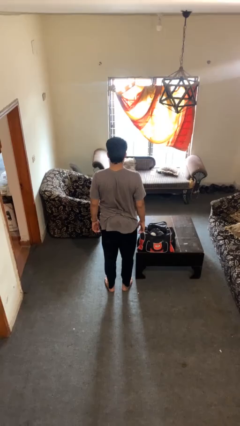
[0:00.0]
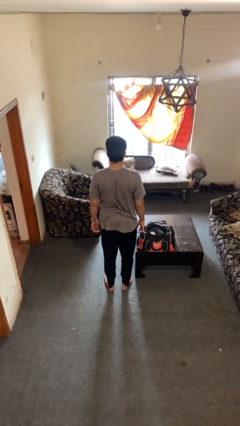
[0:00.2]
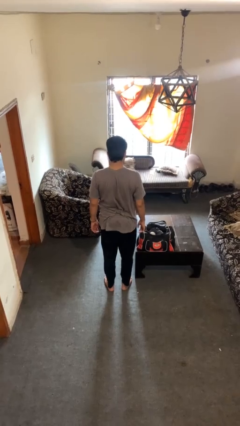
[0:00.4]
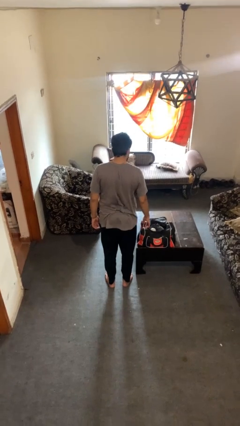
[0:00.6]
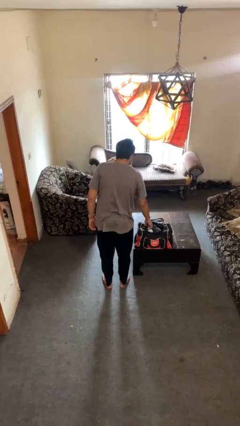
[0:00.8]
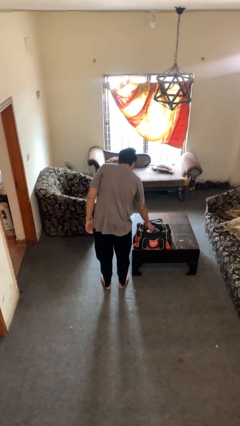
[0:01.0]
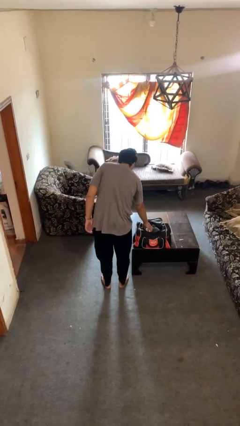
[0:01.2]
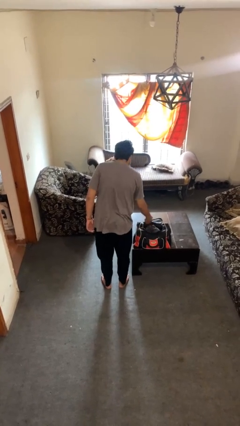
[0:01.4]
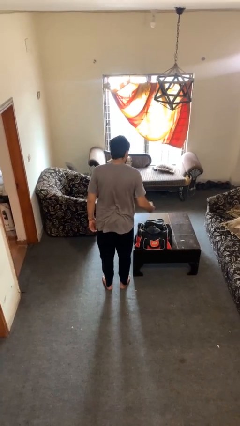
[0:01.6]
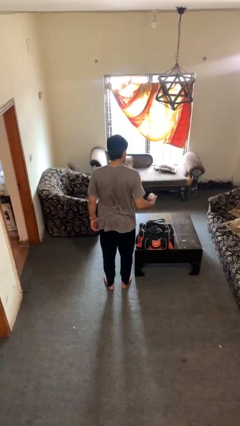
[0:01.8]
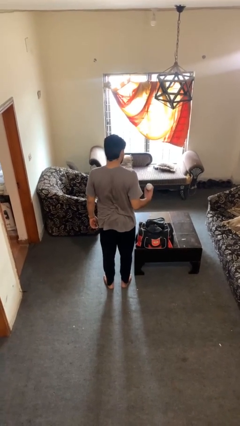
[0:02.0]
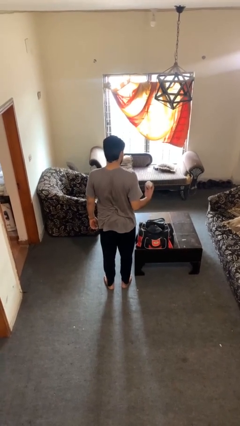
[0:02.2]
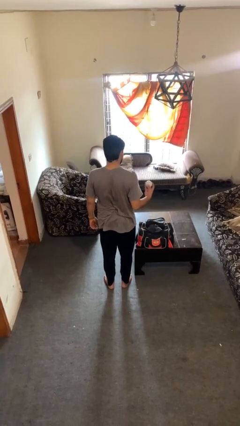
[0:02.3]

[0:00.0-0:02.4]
person takes object from bag

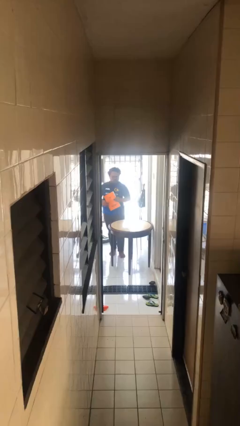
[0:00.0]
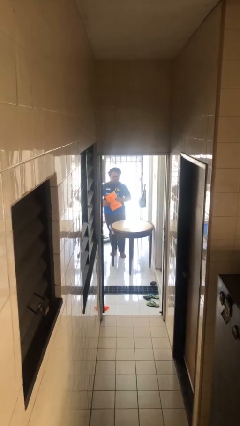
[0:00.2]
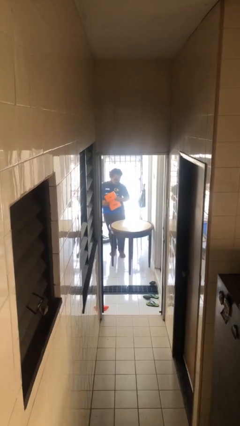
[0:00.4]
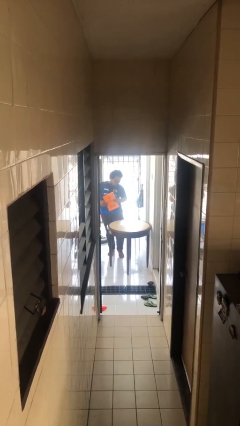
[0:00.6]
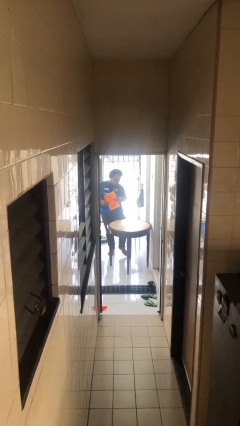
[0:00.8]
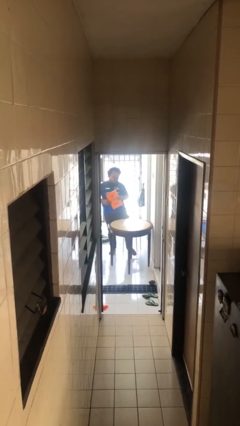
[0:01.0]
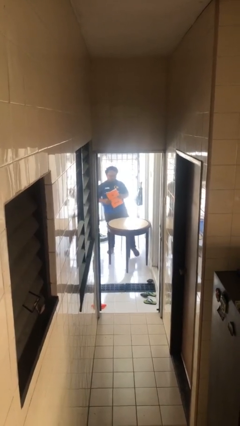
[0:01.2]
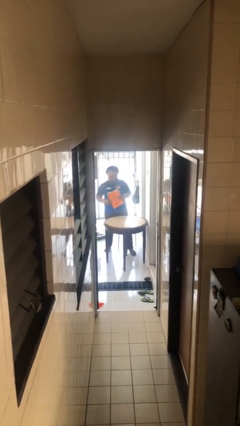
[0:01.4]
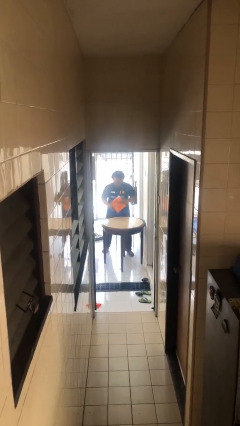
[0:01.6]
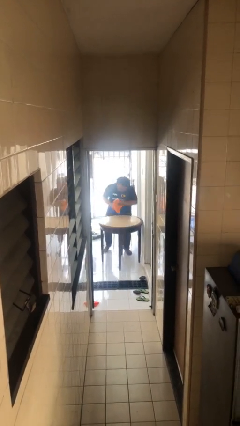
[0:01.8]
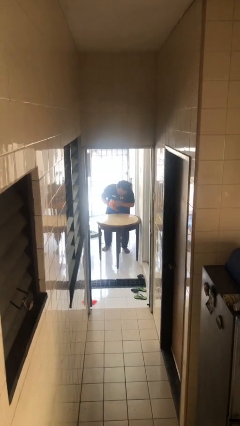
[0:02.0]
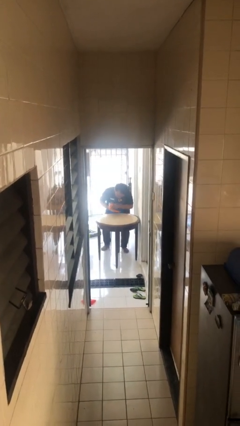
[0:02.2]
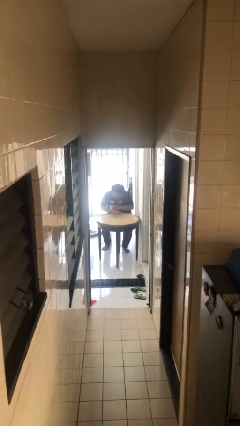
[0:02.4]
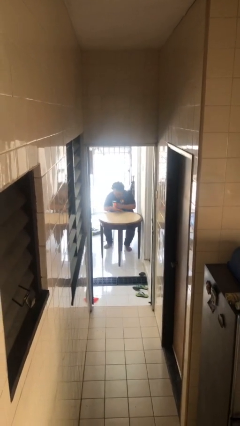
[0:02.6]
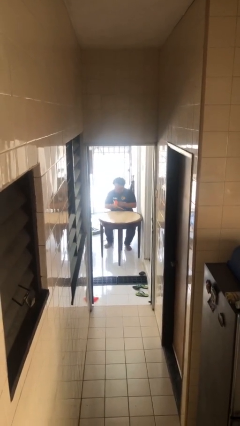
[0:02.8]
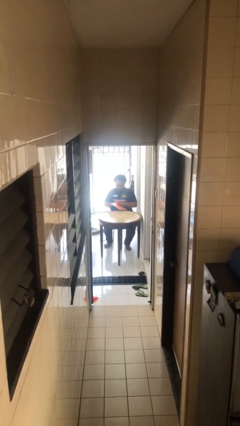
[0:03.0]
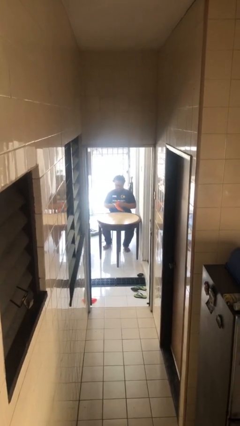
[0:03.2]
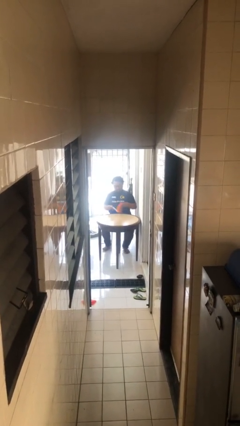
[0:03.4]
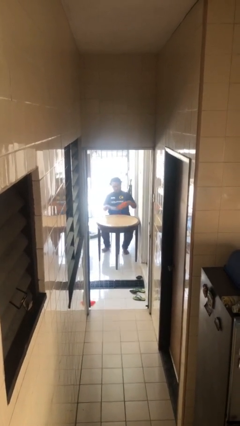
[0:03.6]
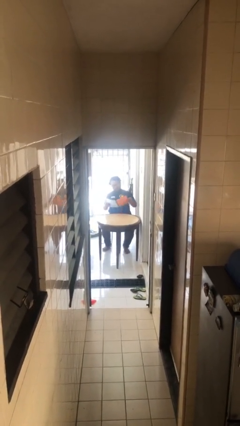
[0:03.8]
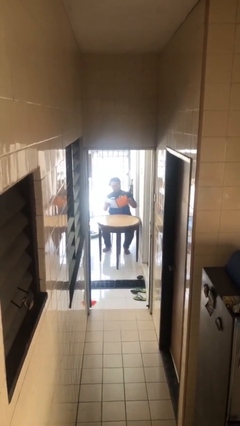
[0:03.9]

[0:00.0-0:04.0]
person sits down

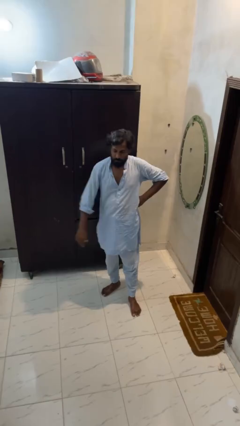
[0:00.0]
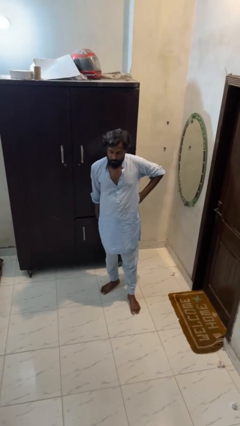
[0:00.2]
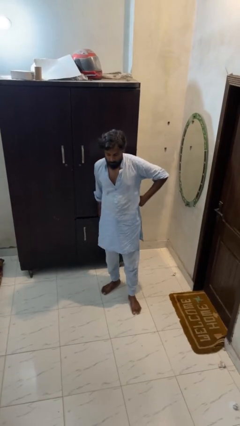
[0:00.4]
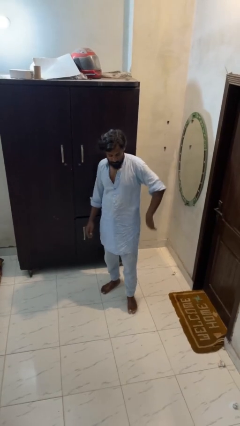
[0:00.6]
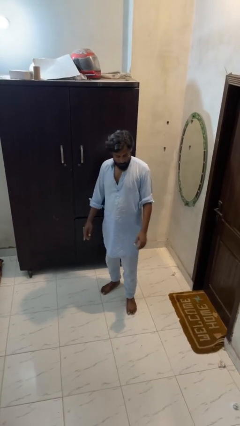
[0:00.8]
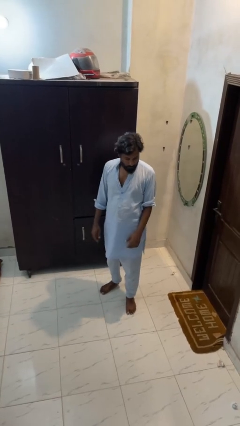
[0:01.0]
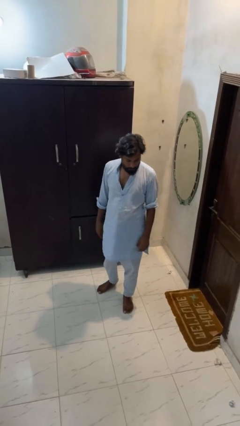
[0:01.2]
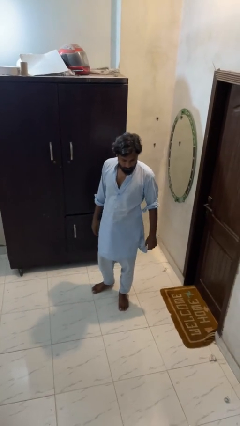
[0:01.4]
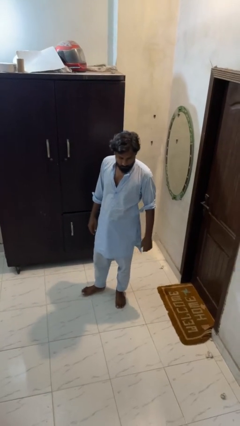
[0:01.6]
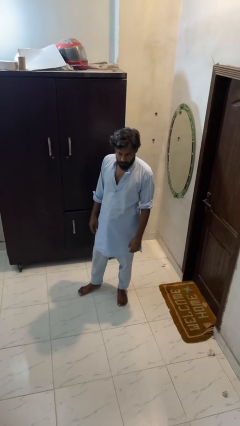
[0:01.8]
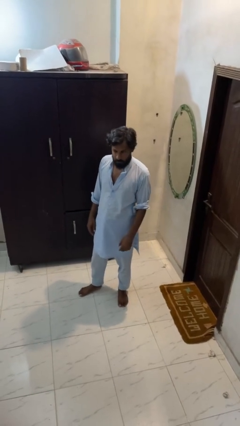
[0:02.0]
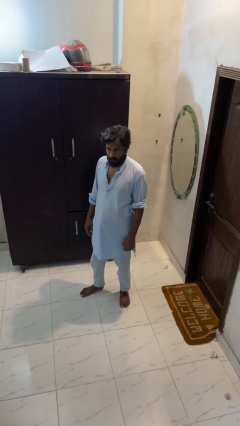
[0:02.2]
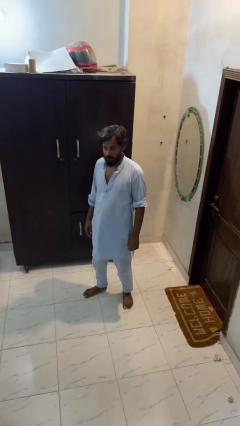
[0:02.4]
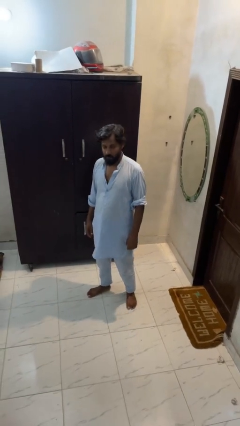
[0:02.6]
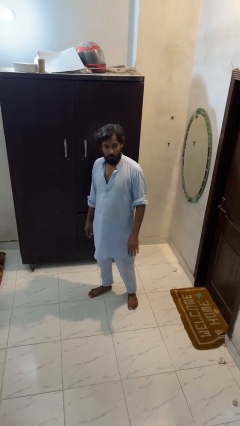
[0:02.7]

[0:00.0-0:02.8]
person gestures lower hand

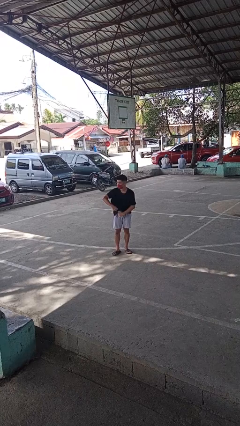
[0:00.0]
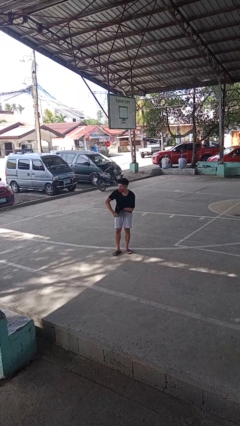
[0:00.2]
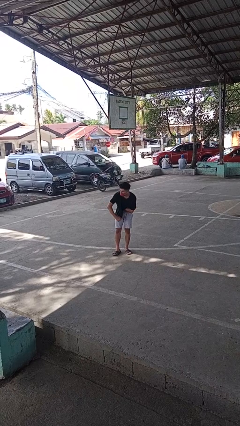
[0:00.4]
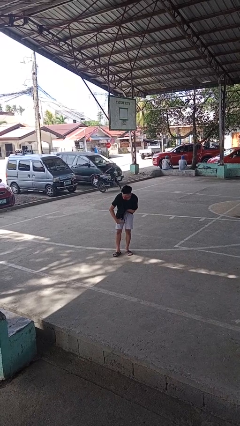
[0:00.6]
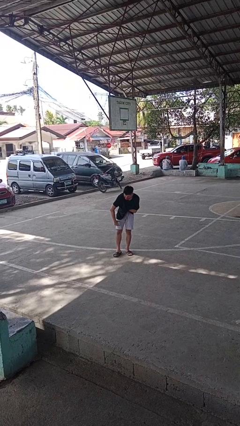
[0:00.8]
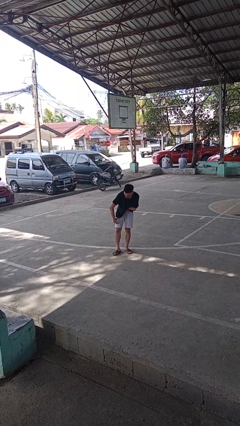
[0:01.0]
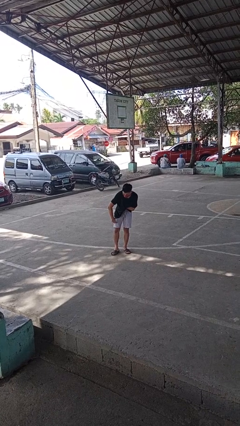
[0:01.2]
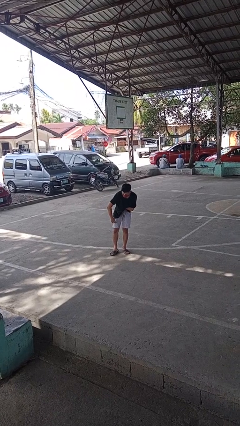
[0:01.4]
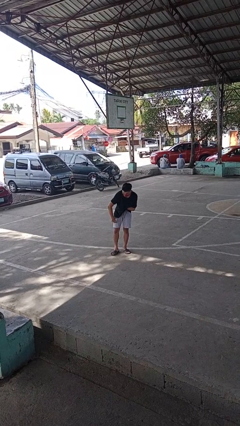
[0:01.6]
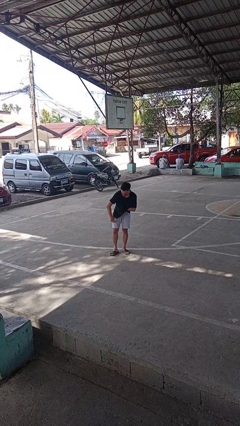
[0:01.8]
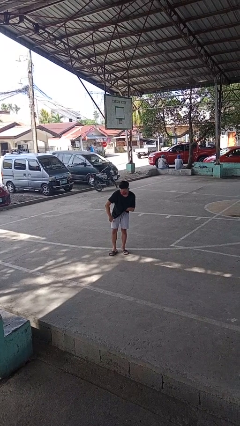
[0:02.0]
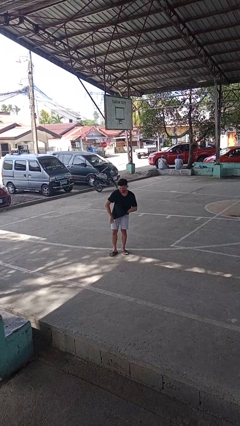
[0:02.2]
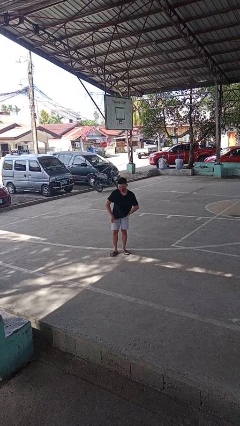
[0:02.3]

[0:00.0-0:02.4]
person applies deodorant

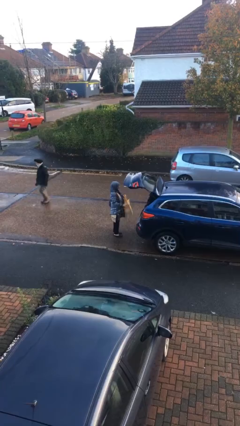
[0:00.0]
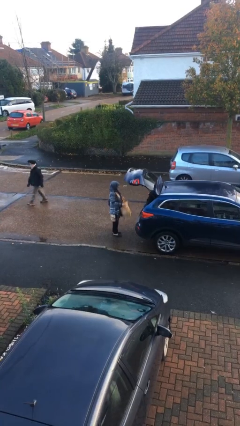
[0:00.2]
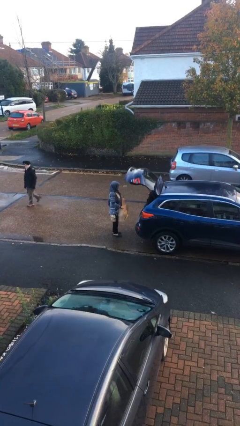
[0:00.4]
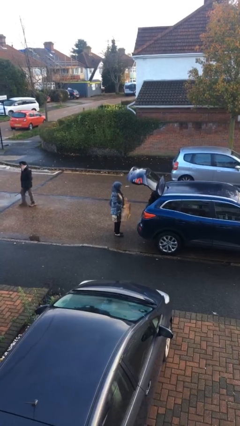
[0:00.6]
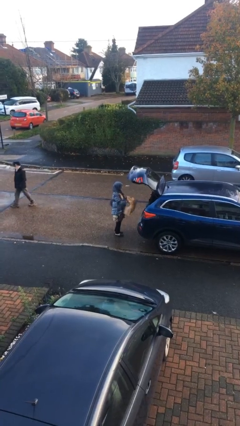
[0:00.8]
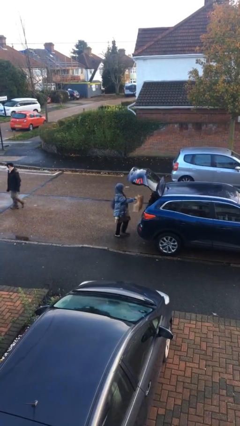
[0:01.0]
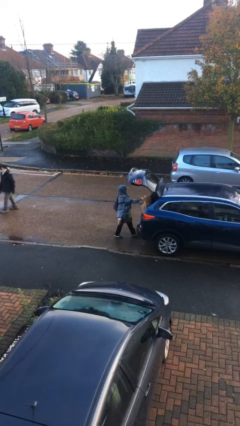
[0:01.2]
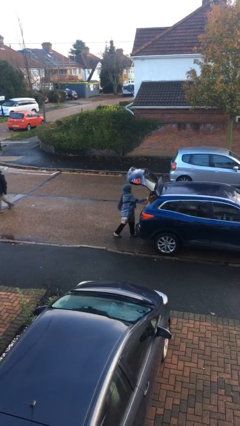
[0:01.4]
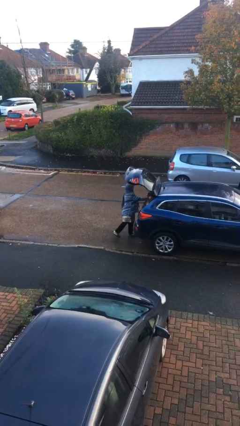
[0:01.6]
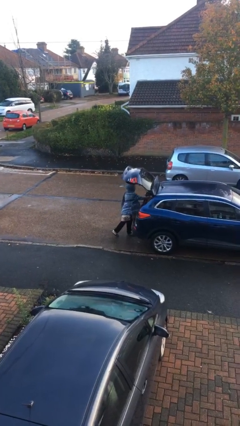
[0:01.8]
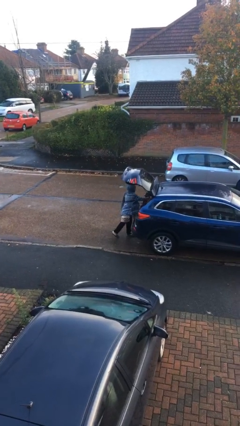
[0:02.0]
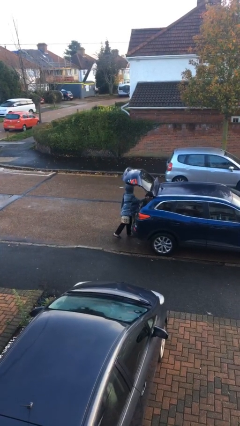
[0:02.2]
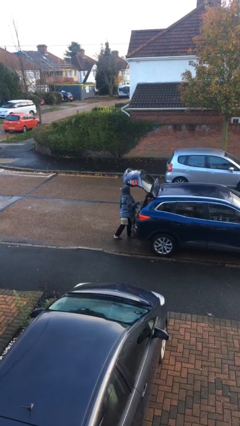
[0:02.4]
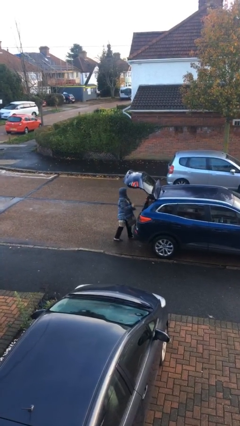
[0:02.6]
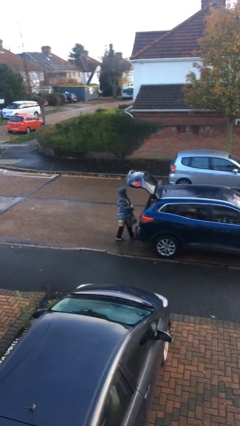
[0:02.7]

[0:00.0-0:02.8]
person loads car

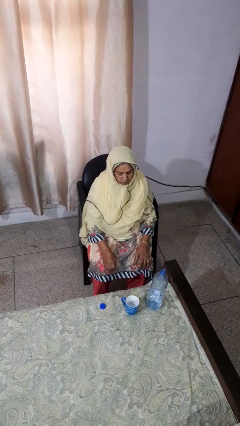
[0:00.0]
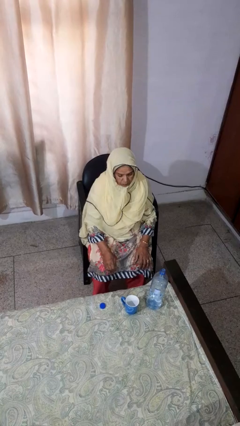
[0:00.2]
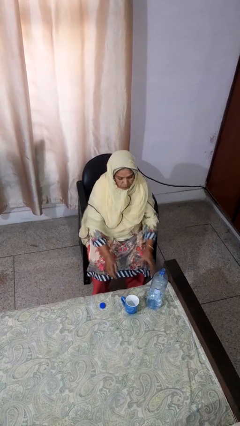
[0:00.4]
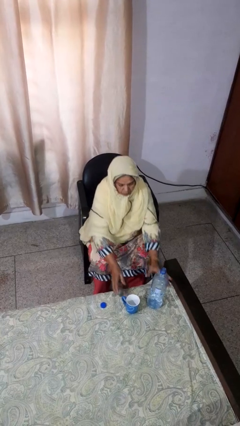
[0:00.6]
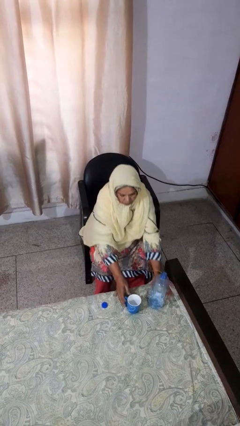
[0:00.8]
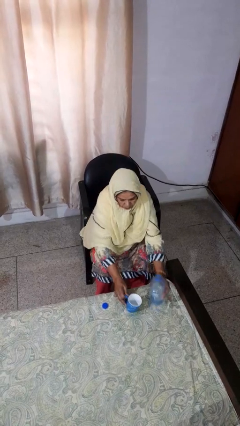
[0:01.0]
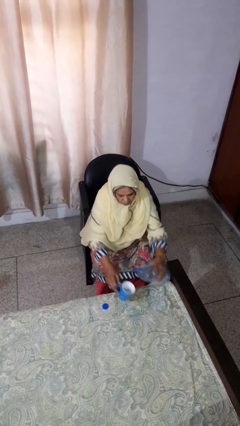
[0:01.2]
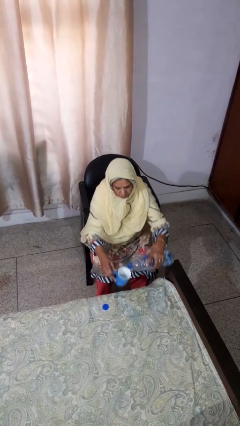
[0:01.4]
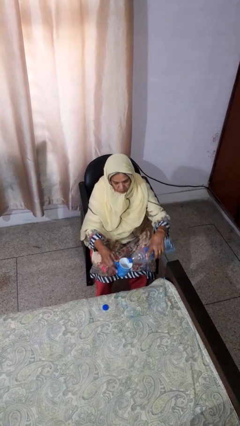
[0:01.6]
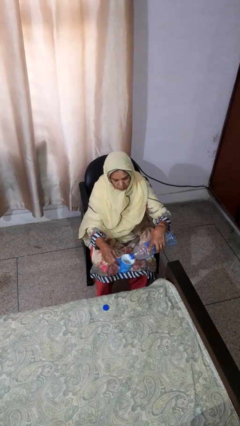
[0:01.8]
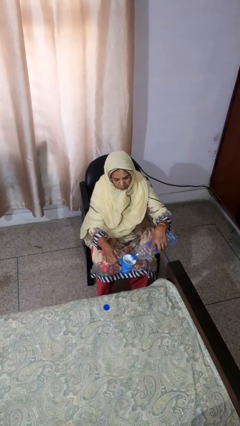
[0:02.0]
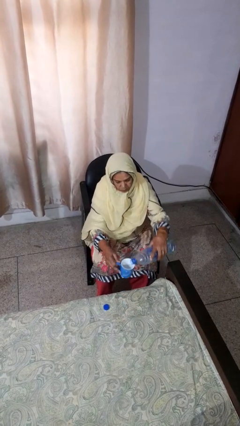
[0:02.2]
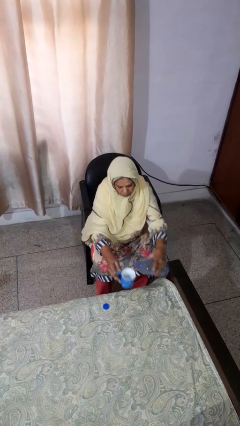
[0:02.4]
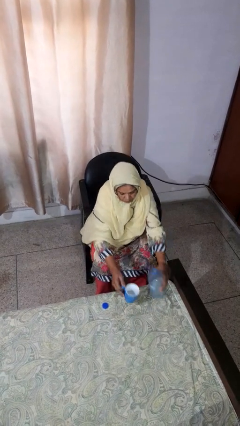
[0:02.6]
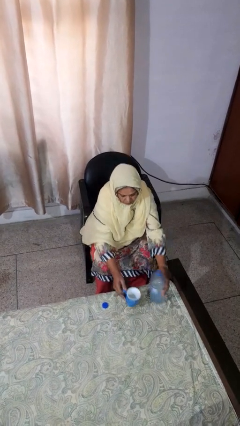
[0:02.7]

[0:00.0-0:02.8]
person pours liquid into cup

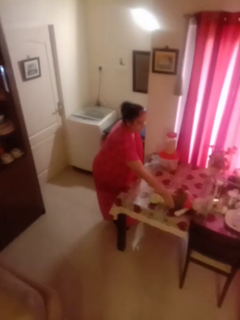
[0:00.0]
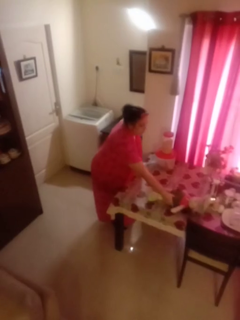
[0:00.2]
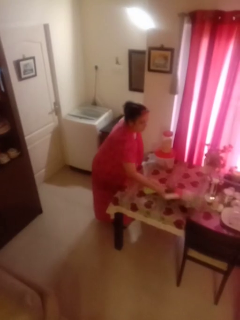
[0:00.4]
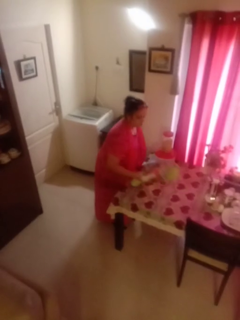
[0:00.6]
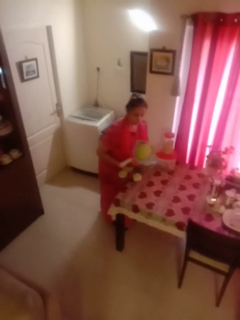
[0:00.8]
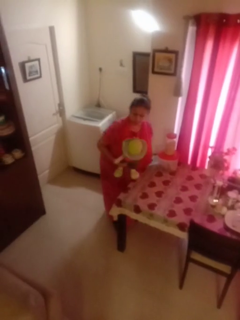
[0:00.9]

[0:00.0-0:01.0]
person picks up object from table
